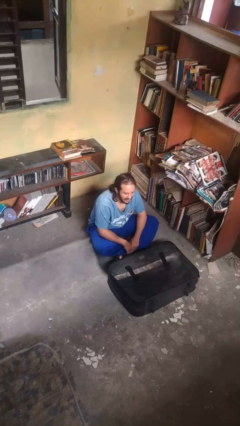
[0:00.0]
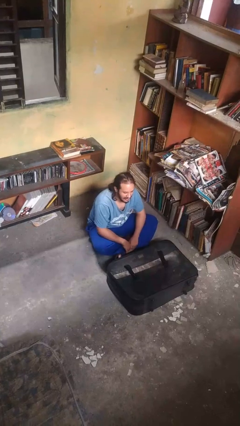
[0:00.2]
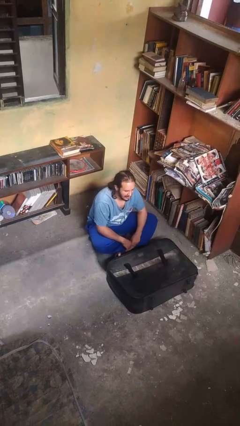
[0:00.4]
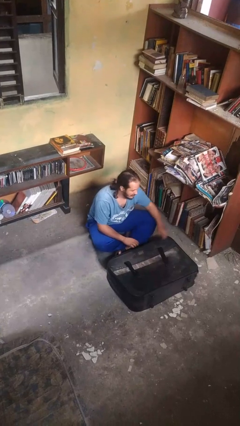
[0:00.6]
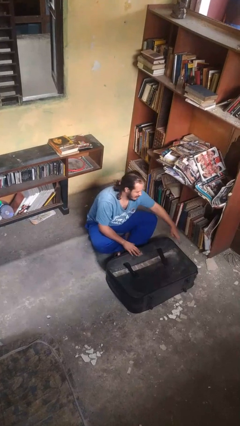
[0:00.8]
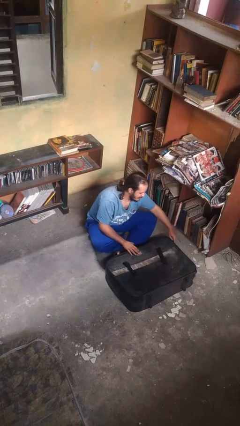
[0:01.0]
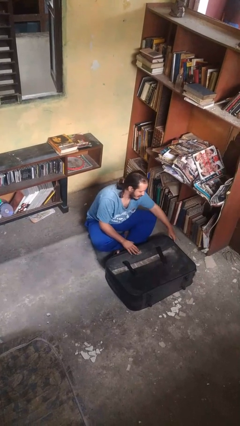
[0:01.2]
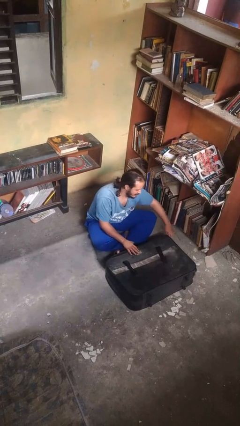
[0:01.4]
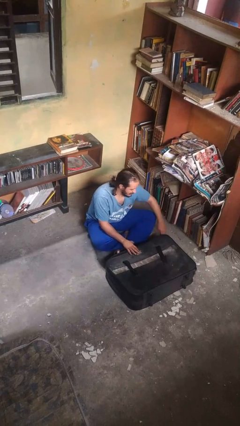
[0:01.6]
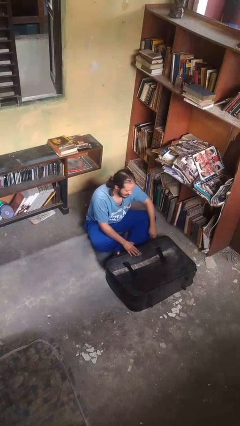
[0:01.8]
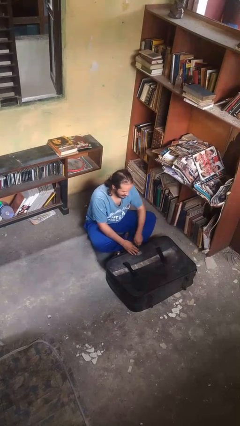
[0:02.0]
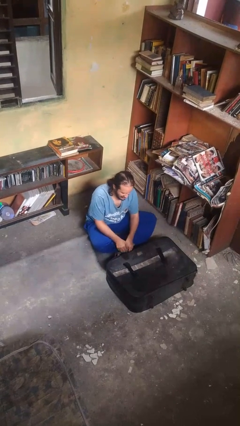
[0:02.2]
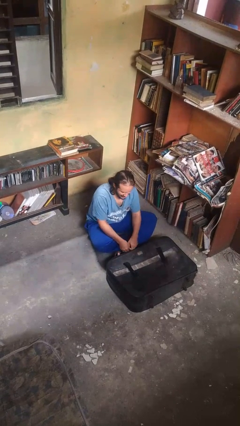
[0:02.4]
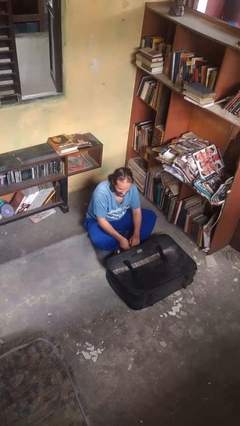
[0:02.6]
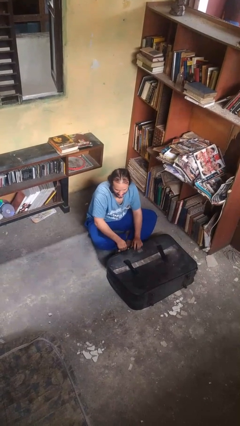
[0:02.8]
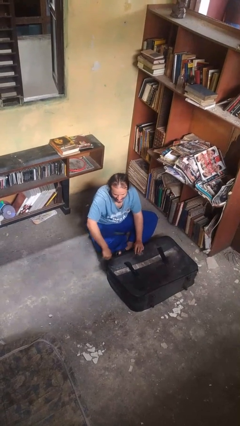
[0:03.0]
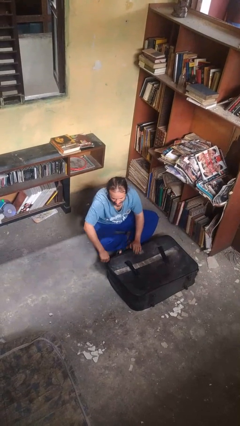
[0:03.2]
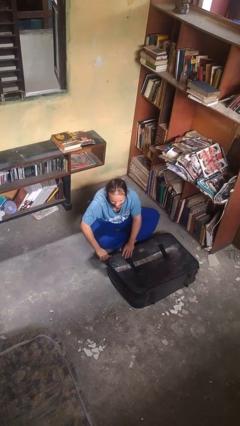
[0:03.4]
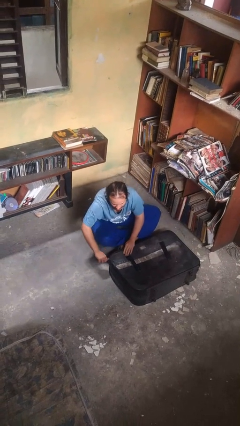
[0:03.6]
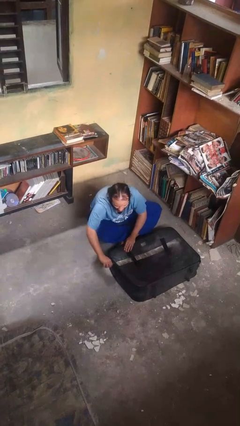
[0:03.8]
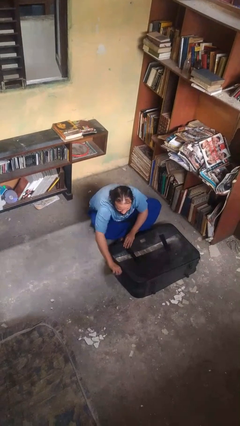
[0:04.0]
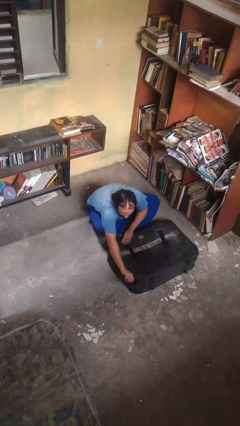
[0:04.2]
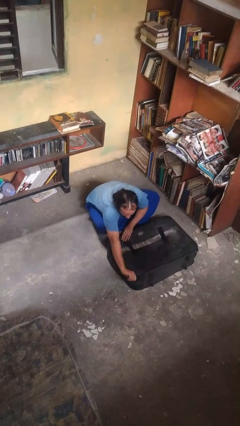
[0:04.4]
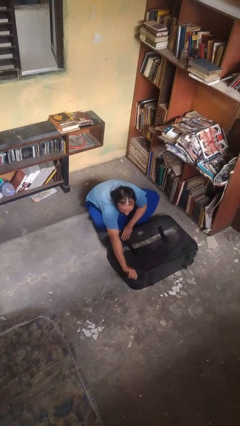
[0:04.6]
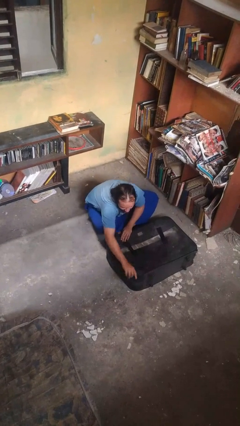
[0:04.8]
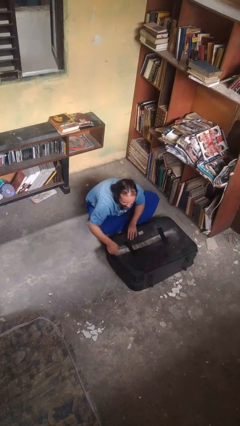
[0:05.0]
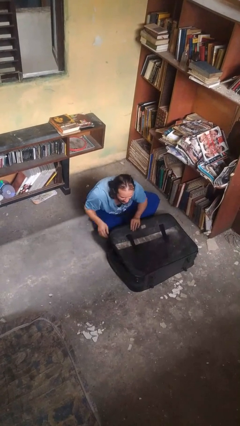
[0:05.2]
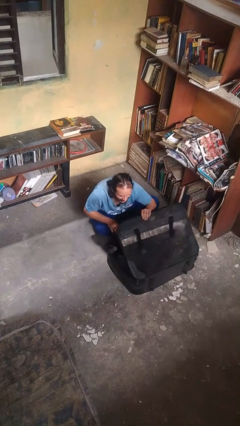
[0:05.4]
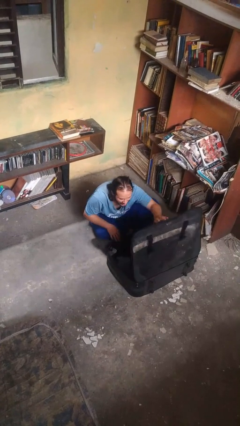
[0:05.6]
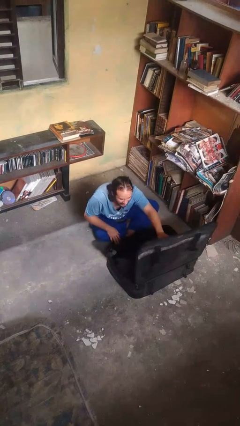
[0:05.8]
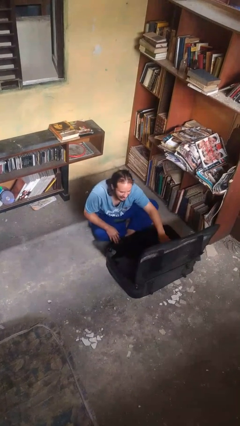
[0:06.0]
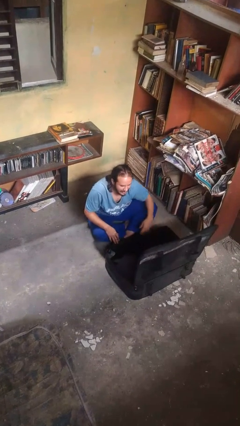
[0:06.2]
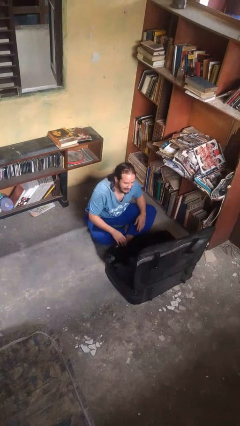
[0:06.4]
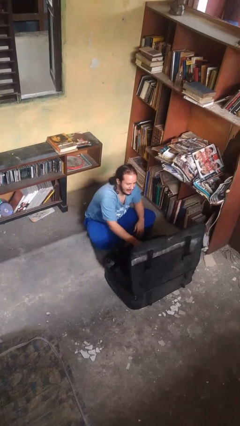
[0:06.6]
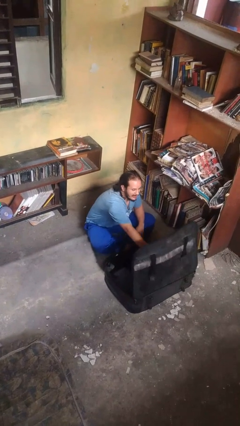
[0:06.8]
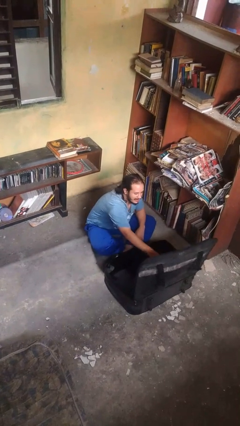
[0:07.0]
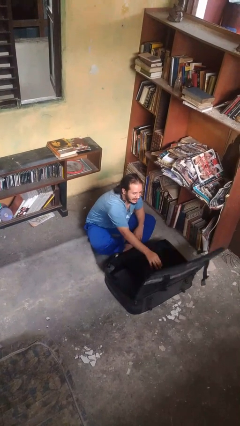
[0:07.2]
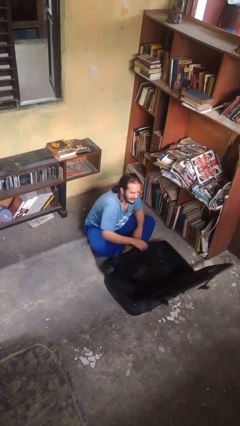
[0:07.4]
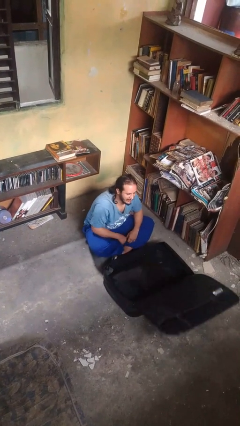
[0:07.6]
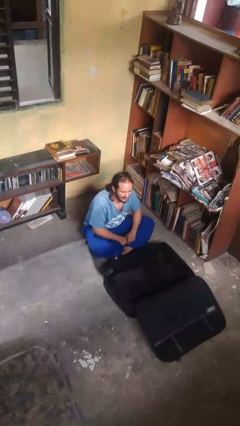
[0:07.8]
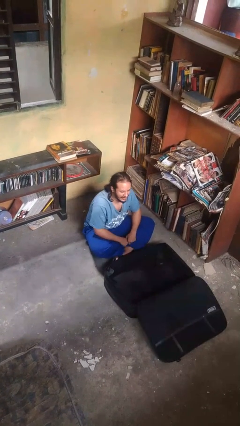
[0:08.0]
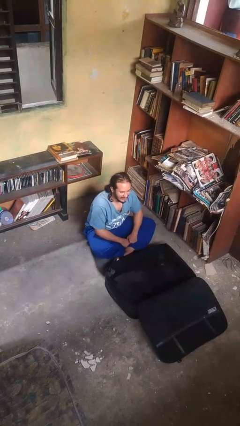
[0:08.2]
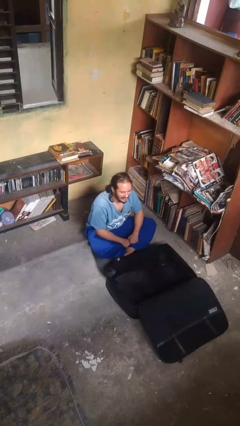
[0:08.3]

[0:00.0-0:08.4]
person opens suitcase

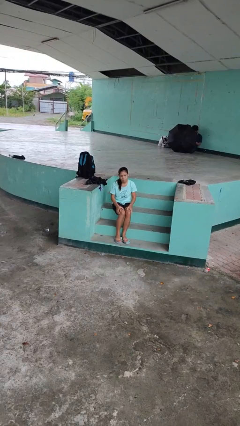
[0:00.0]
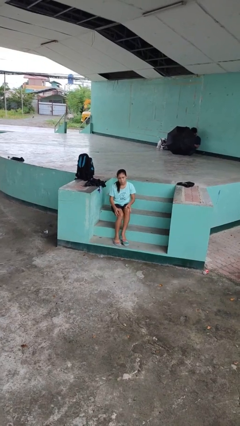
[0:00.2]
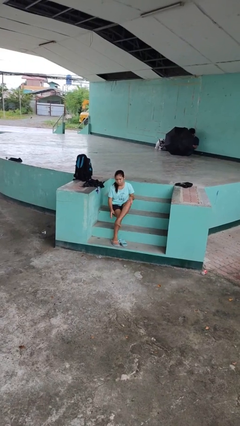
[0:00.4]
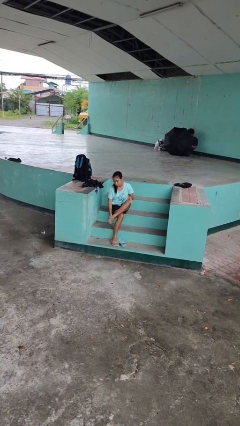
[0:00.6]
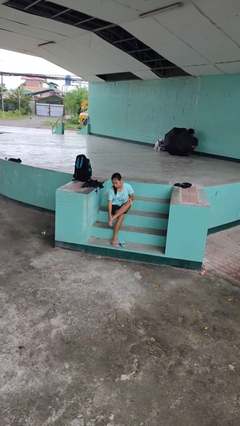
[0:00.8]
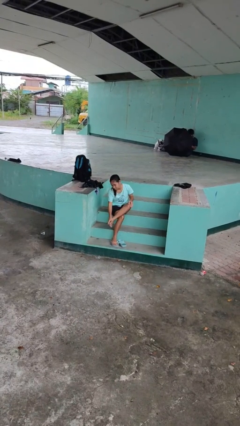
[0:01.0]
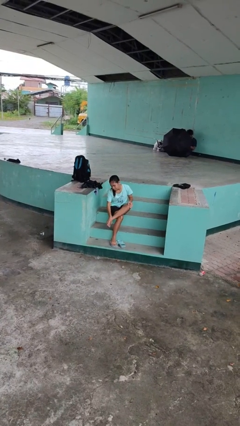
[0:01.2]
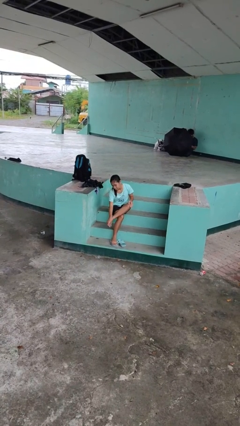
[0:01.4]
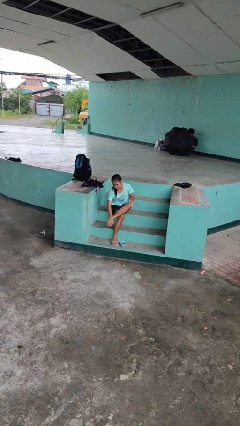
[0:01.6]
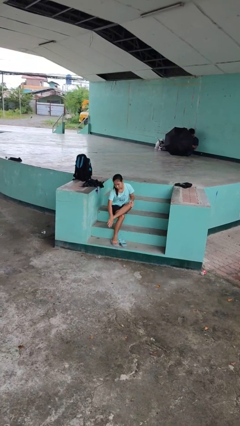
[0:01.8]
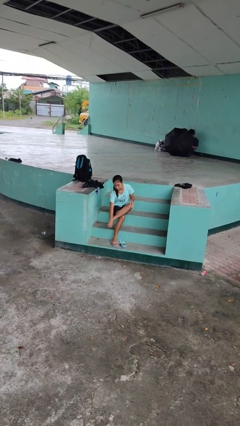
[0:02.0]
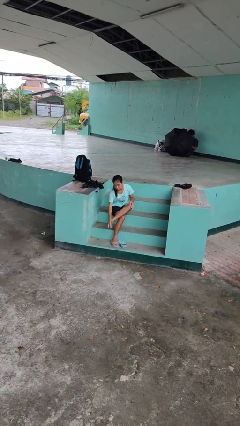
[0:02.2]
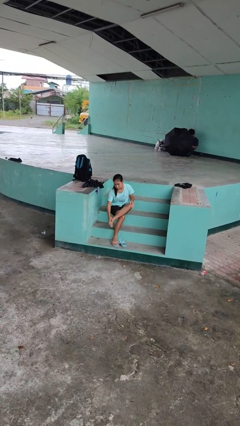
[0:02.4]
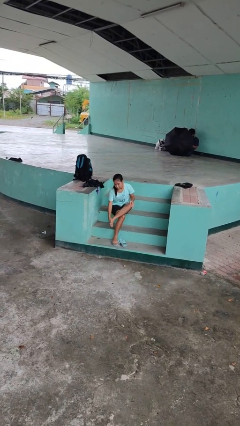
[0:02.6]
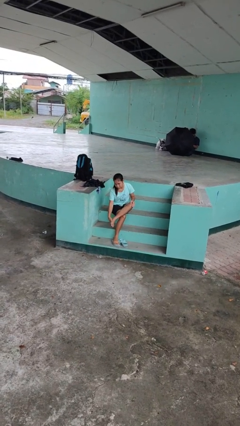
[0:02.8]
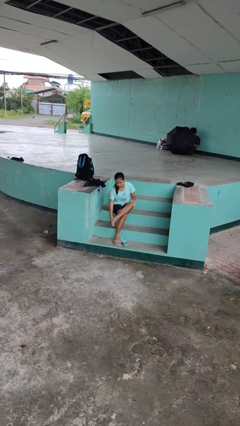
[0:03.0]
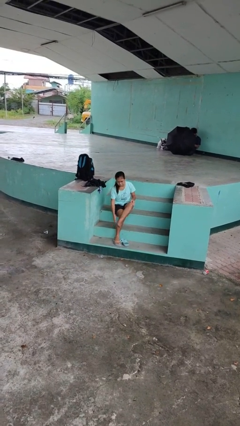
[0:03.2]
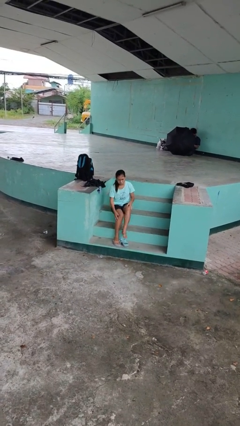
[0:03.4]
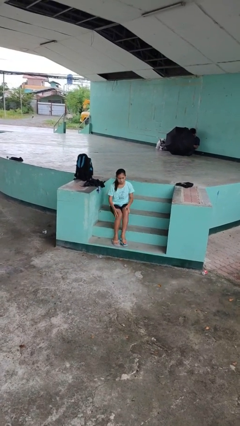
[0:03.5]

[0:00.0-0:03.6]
person rubs foot

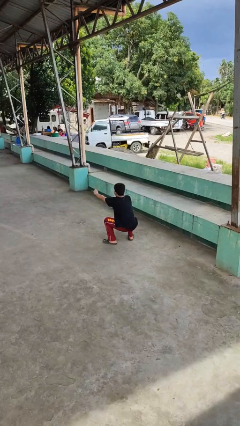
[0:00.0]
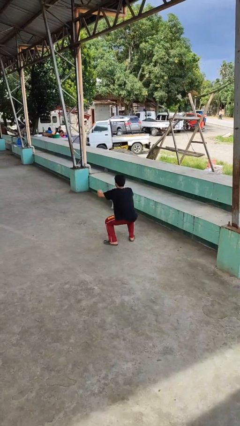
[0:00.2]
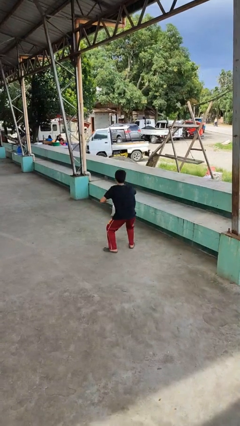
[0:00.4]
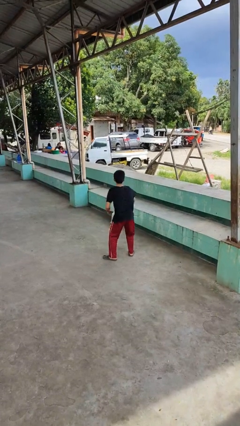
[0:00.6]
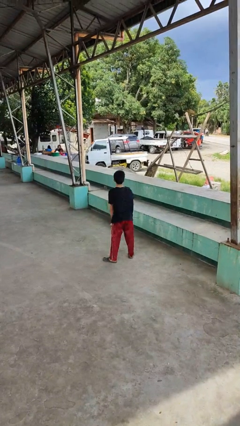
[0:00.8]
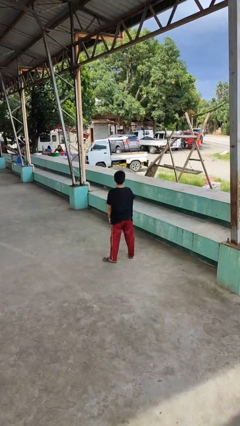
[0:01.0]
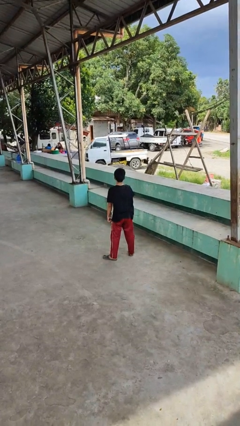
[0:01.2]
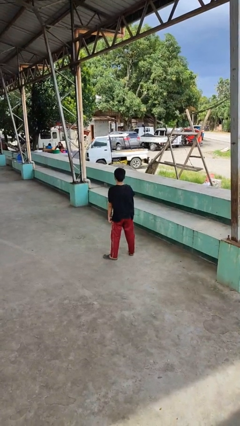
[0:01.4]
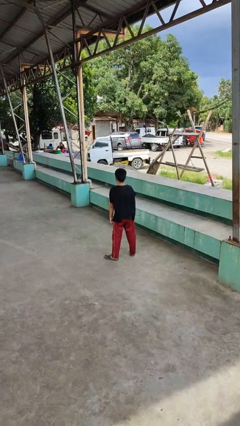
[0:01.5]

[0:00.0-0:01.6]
person stands up

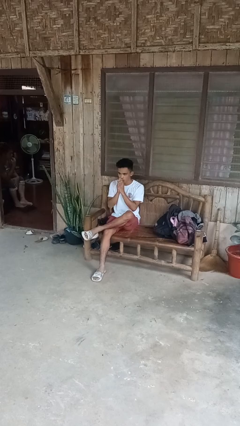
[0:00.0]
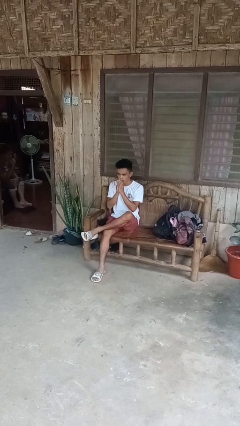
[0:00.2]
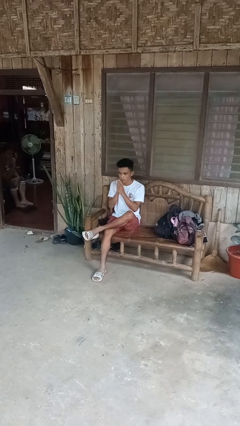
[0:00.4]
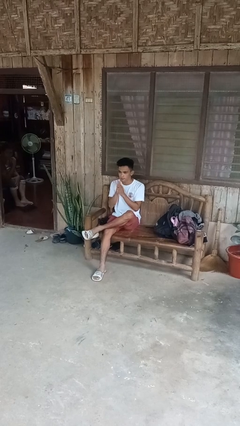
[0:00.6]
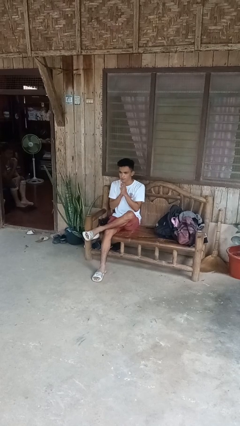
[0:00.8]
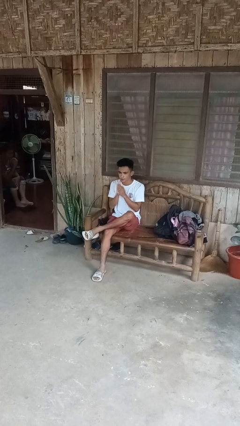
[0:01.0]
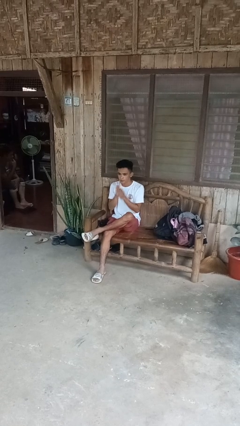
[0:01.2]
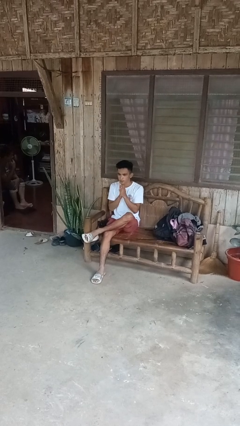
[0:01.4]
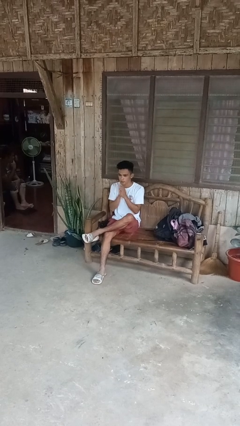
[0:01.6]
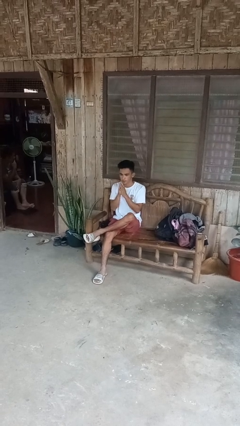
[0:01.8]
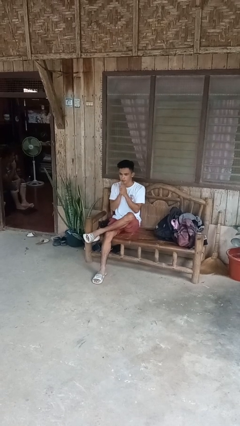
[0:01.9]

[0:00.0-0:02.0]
person blows into hands

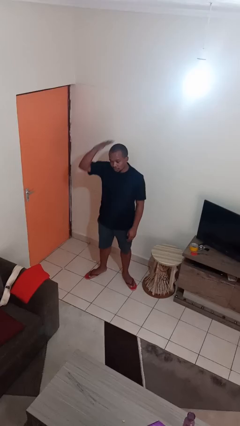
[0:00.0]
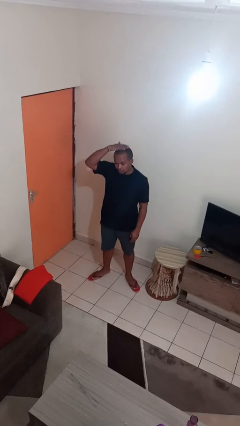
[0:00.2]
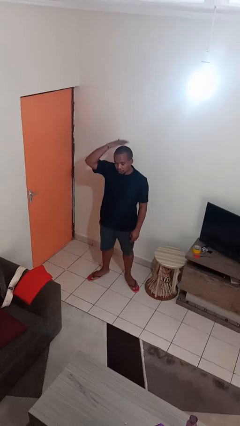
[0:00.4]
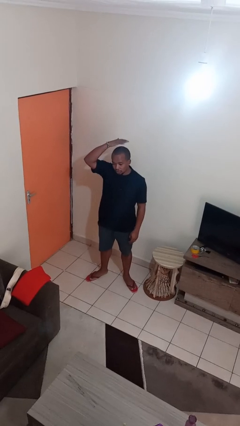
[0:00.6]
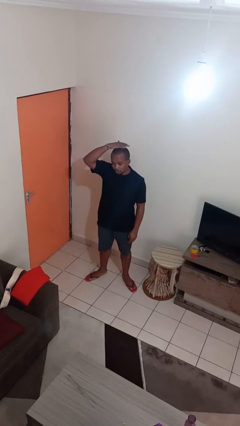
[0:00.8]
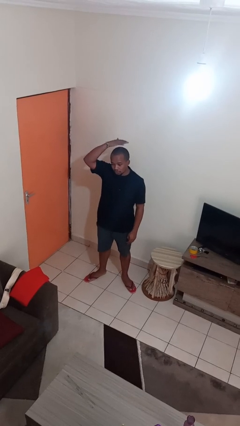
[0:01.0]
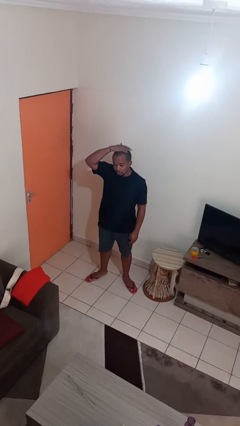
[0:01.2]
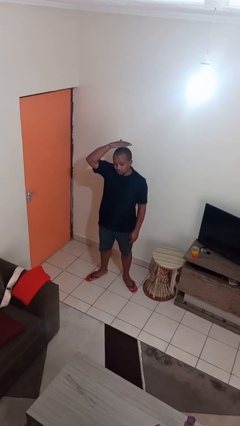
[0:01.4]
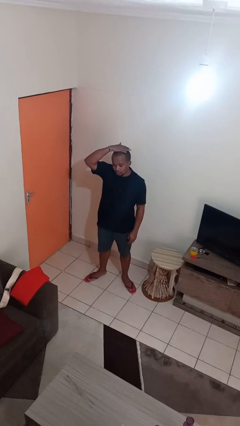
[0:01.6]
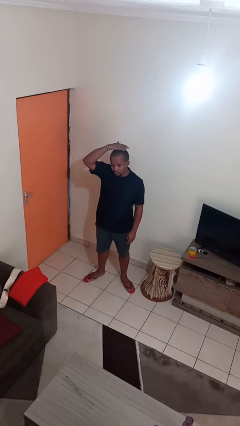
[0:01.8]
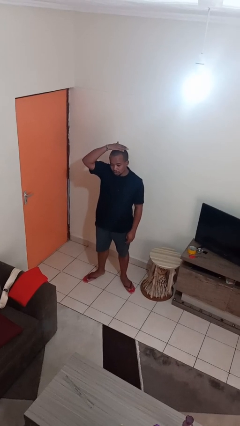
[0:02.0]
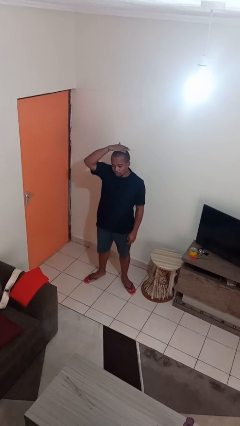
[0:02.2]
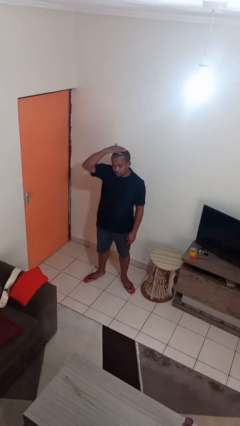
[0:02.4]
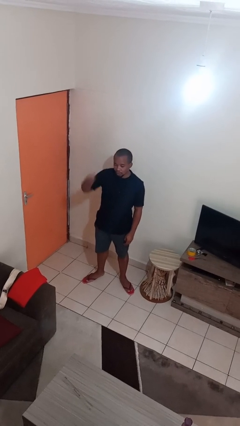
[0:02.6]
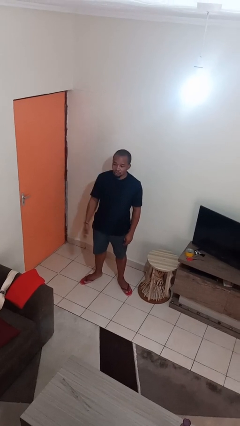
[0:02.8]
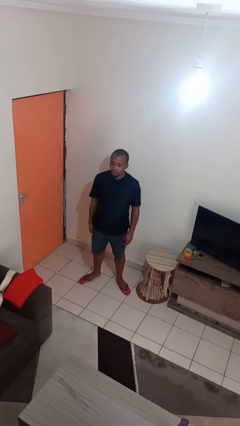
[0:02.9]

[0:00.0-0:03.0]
person pats head
